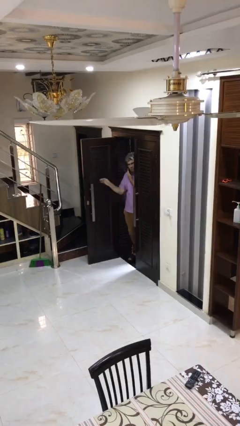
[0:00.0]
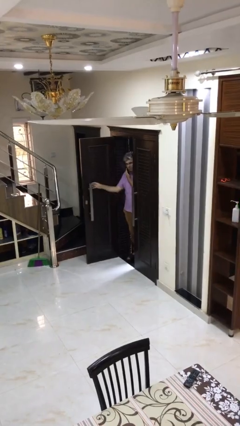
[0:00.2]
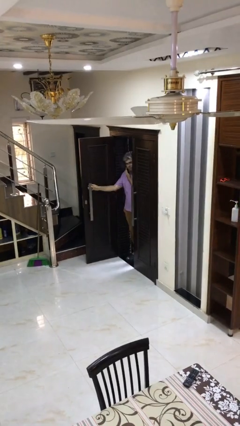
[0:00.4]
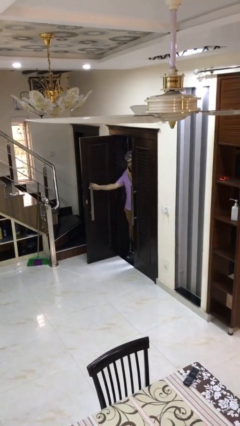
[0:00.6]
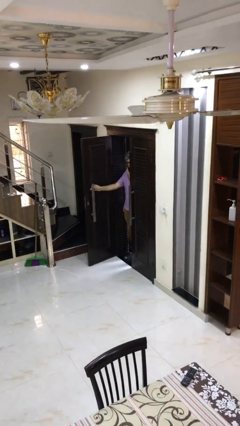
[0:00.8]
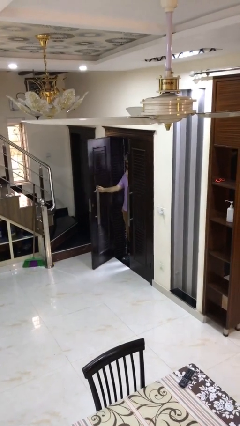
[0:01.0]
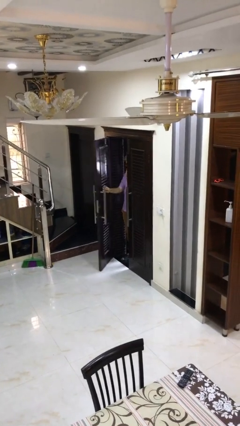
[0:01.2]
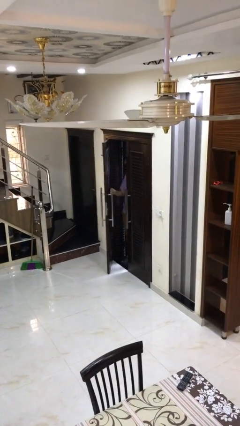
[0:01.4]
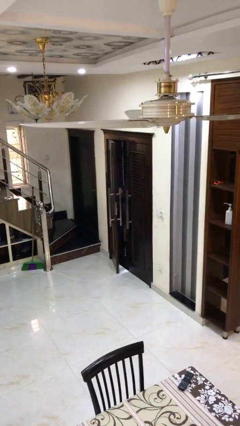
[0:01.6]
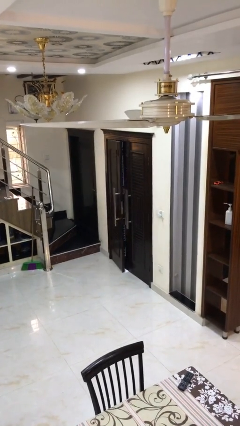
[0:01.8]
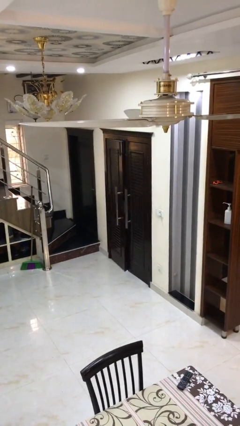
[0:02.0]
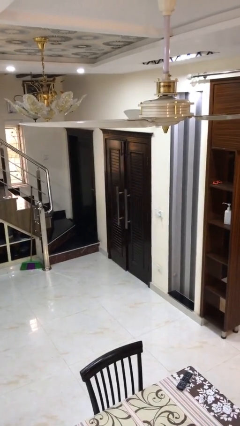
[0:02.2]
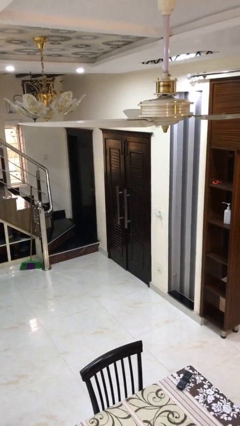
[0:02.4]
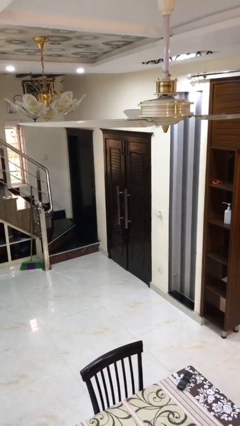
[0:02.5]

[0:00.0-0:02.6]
person closes facility door

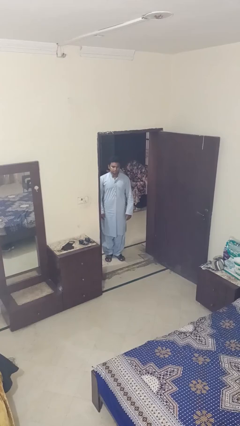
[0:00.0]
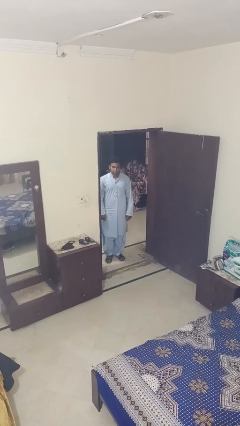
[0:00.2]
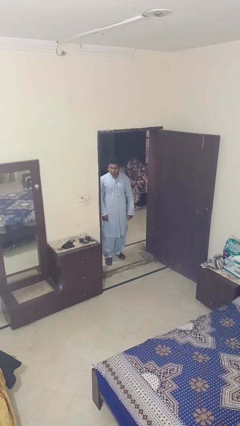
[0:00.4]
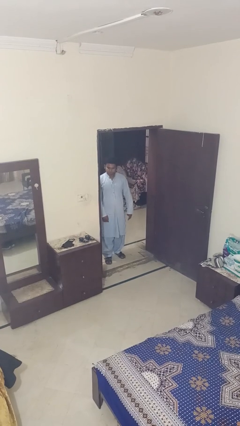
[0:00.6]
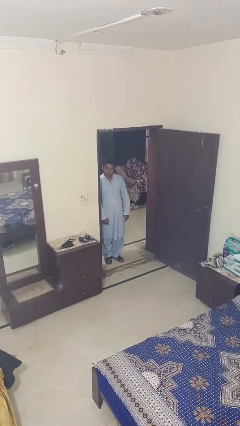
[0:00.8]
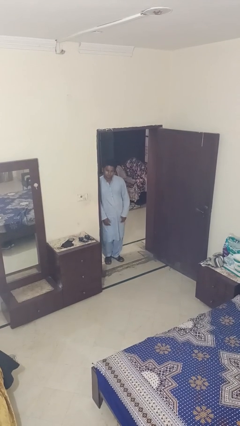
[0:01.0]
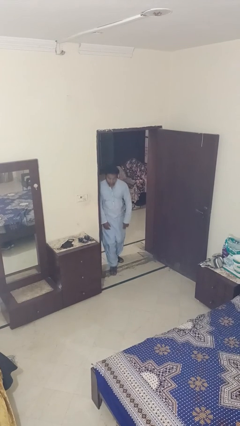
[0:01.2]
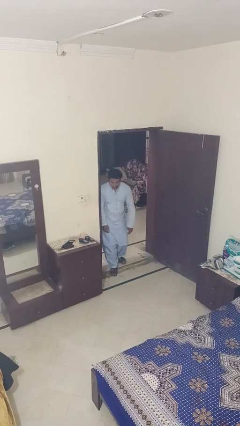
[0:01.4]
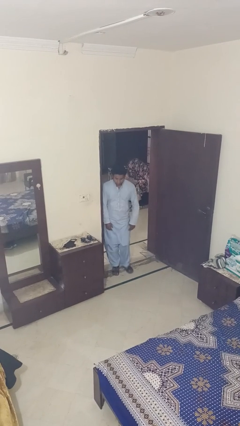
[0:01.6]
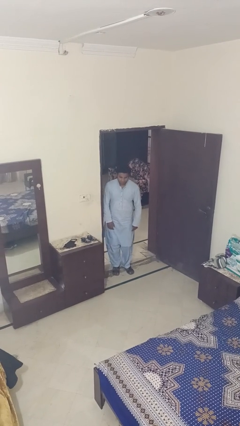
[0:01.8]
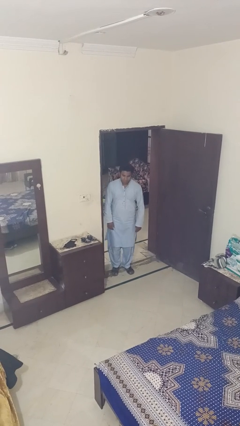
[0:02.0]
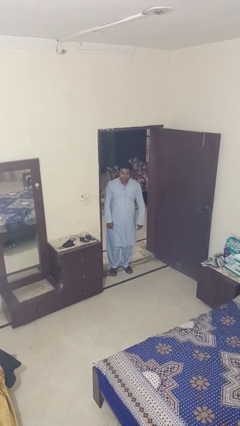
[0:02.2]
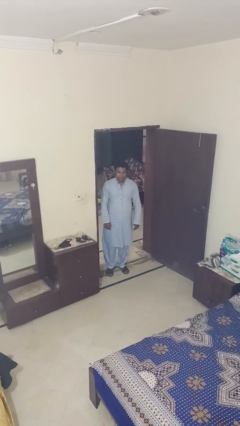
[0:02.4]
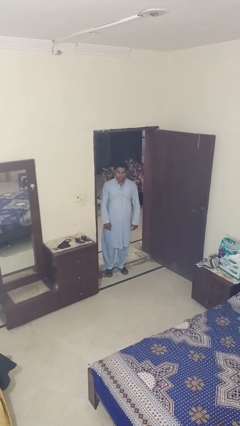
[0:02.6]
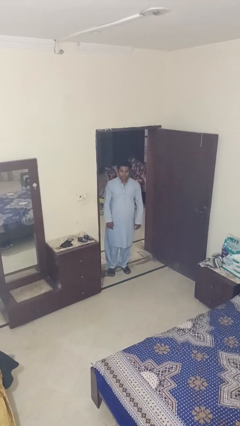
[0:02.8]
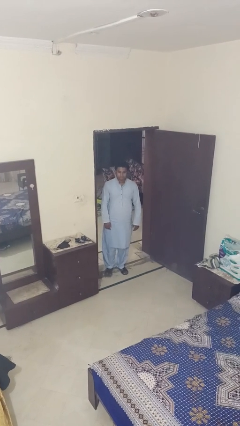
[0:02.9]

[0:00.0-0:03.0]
person bumps into wall

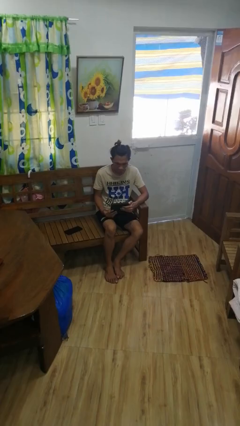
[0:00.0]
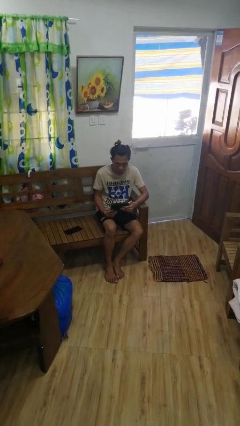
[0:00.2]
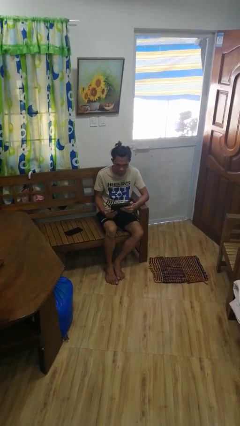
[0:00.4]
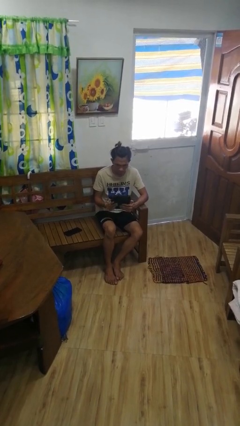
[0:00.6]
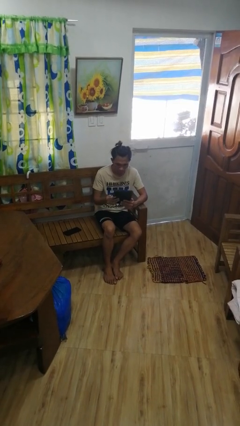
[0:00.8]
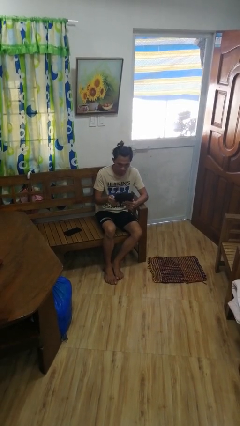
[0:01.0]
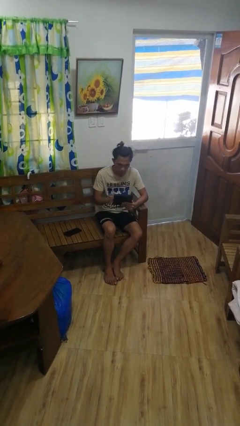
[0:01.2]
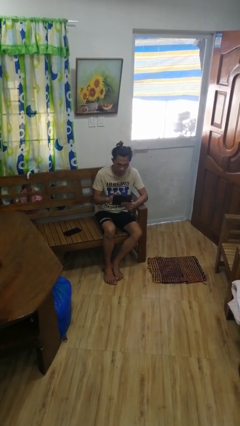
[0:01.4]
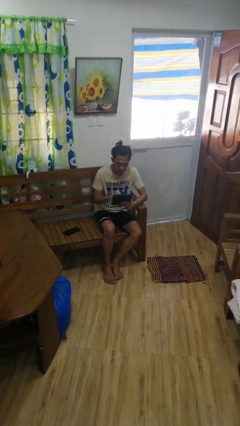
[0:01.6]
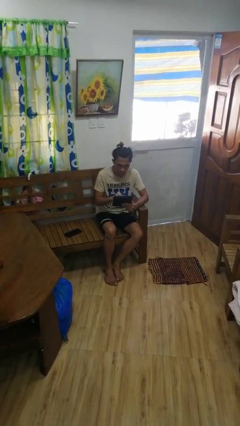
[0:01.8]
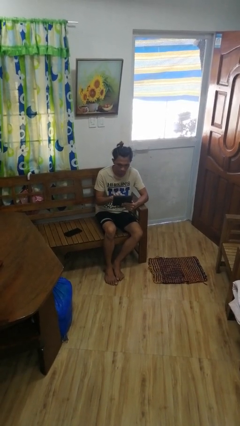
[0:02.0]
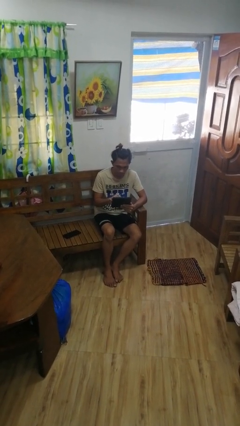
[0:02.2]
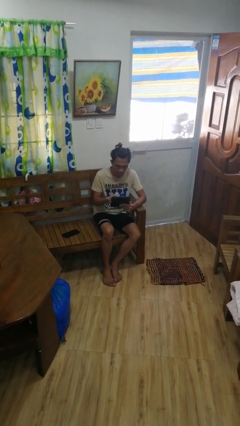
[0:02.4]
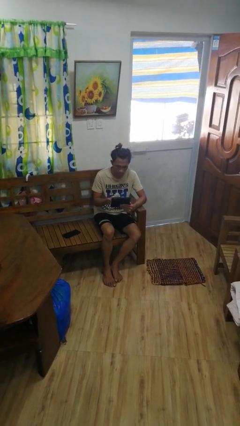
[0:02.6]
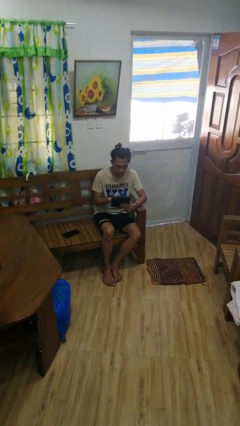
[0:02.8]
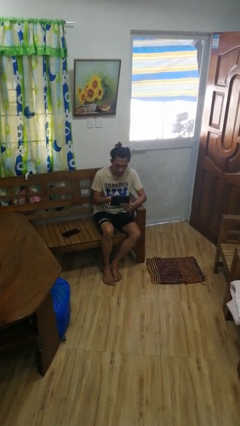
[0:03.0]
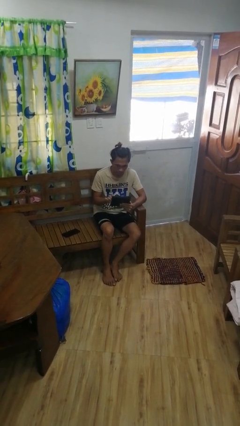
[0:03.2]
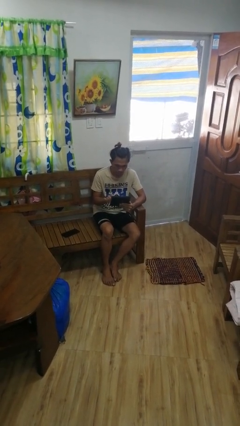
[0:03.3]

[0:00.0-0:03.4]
person interacts with tablet

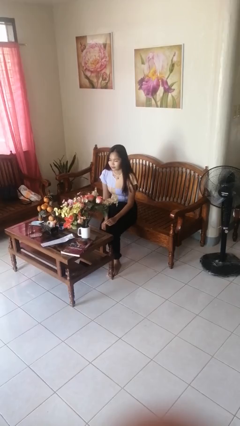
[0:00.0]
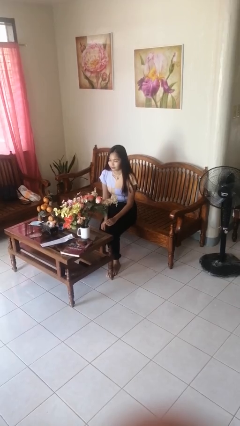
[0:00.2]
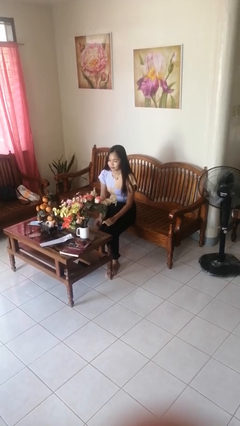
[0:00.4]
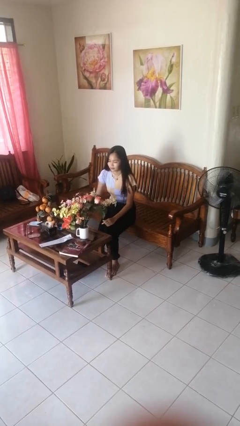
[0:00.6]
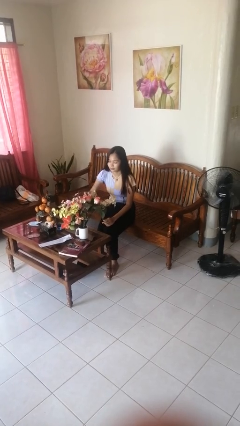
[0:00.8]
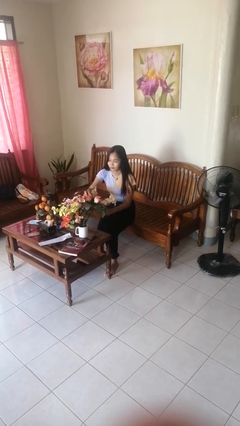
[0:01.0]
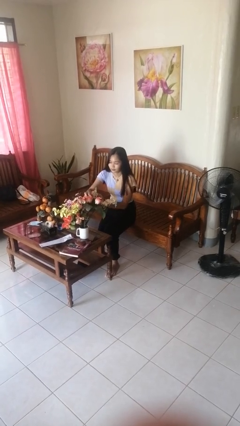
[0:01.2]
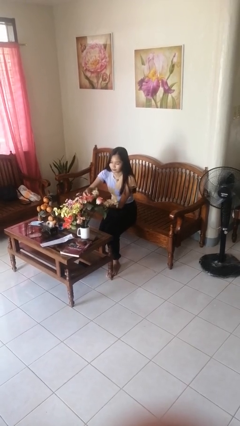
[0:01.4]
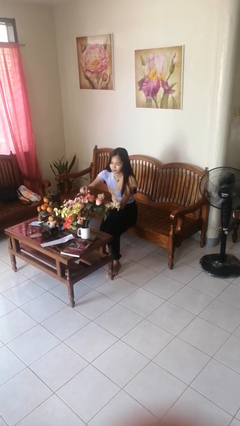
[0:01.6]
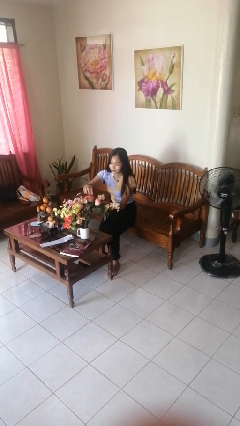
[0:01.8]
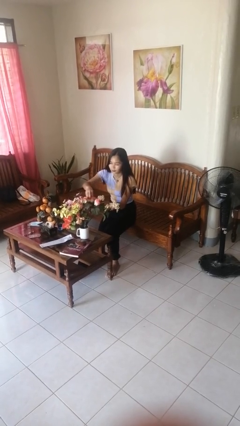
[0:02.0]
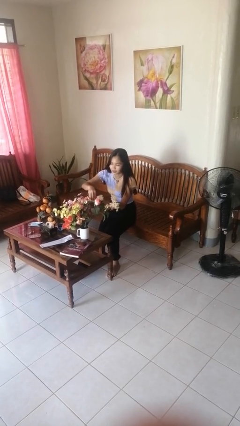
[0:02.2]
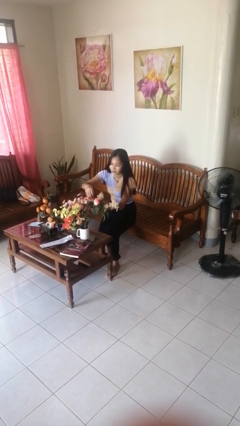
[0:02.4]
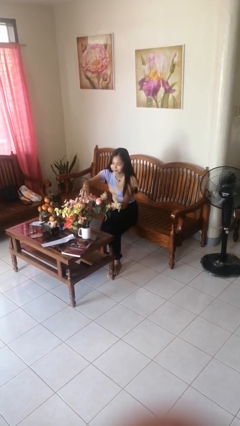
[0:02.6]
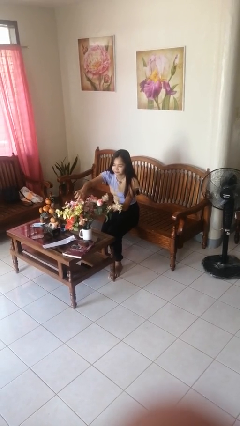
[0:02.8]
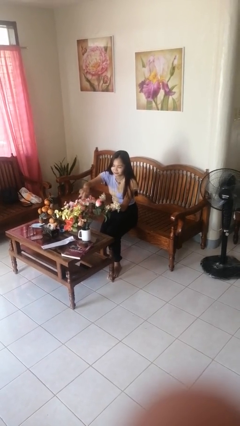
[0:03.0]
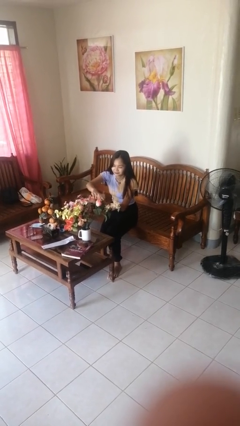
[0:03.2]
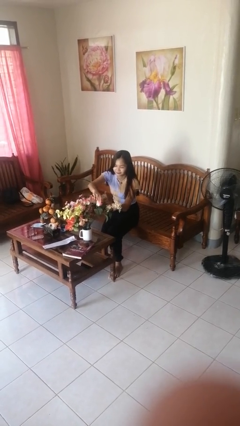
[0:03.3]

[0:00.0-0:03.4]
person arranges flowers in vase

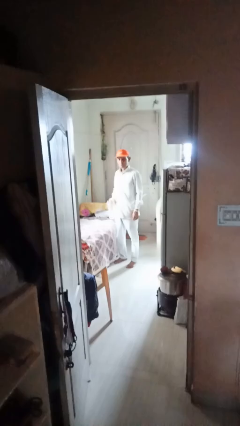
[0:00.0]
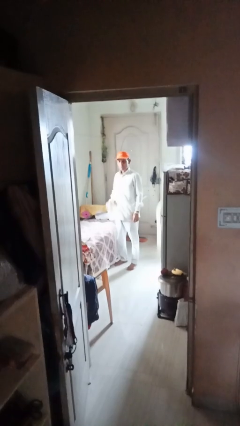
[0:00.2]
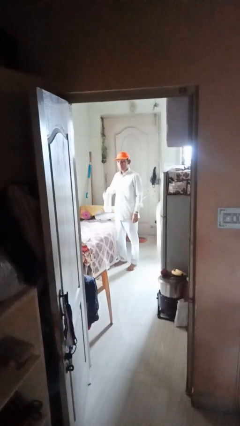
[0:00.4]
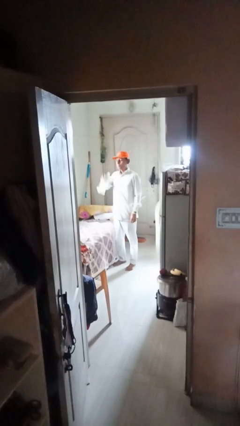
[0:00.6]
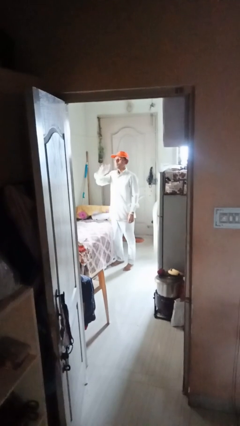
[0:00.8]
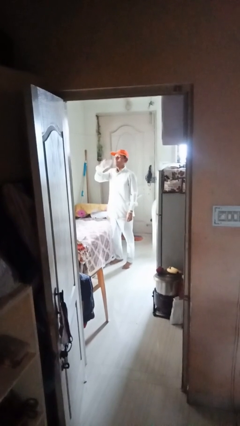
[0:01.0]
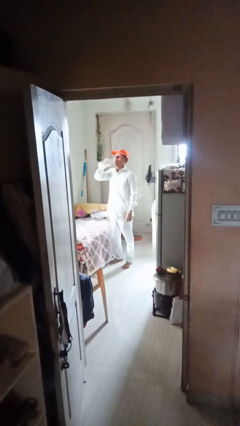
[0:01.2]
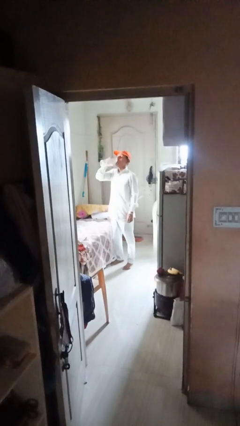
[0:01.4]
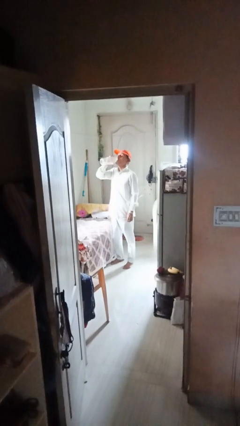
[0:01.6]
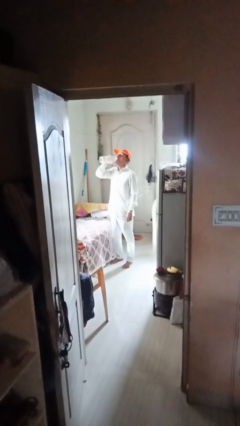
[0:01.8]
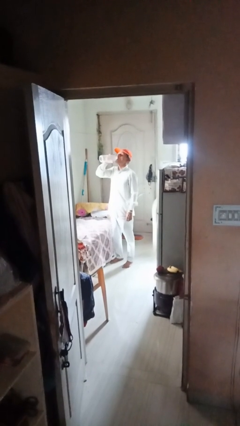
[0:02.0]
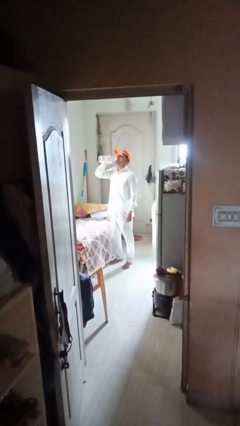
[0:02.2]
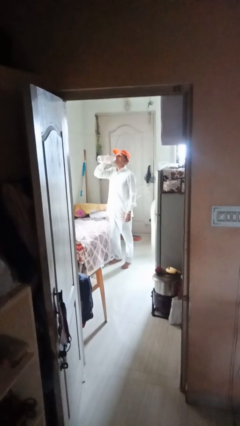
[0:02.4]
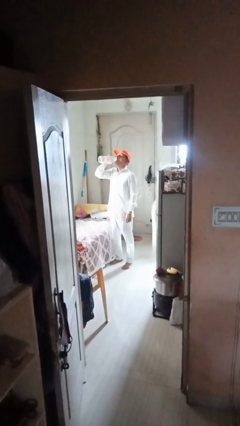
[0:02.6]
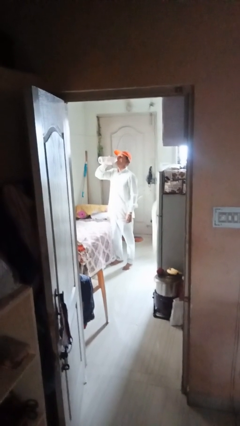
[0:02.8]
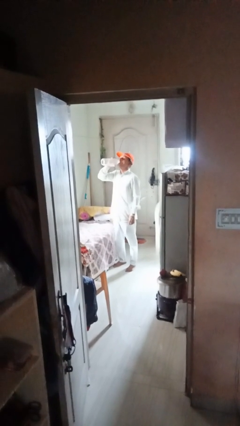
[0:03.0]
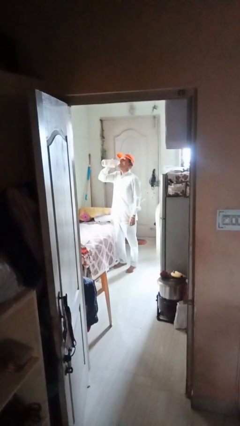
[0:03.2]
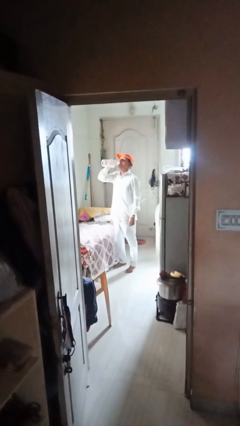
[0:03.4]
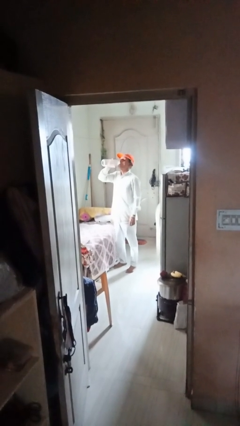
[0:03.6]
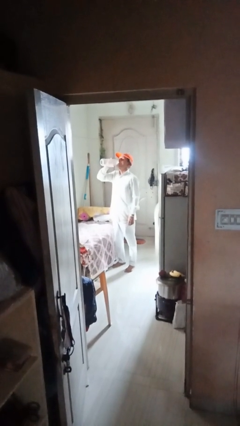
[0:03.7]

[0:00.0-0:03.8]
person drinks from bottle

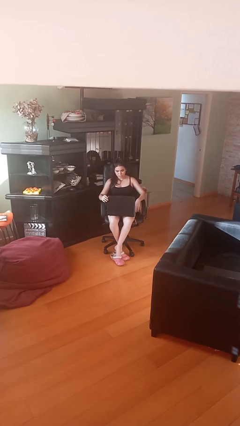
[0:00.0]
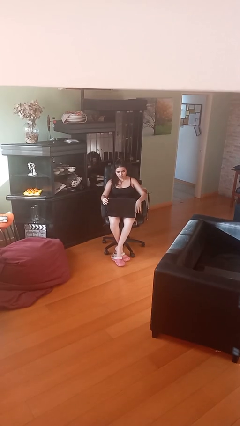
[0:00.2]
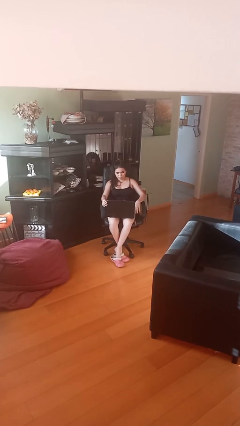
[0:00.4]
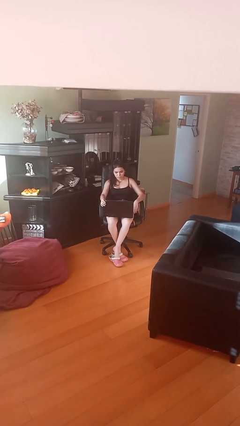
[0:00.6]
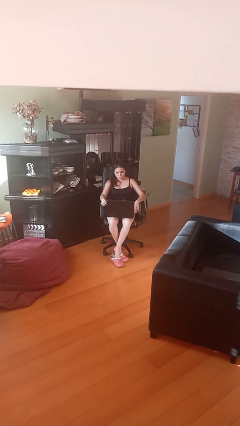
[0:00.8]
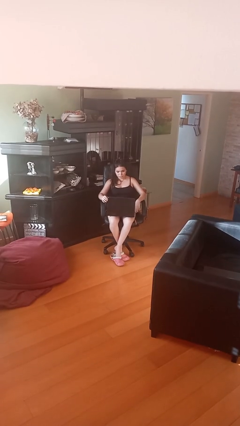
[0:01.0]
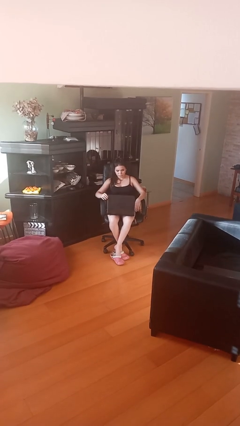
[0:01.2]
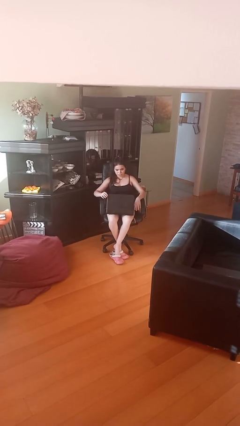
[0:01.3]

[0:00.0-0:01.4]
person interacts with laptop
